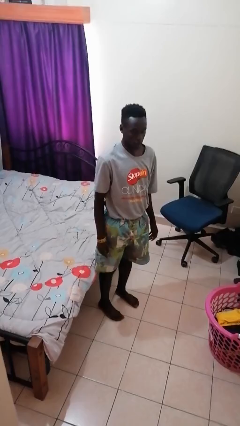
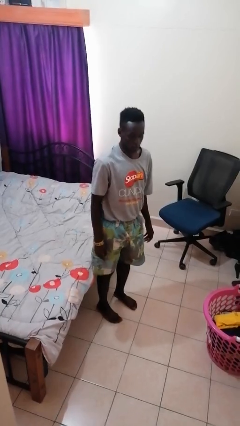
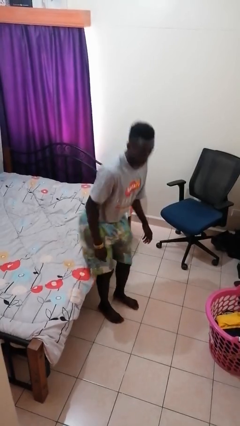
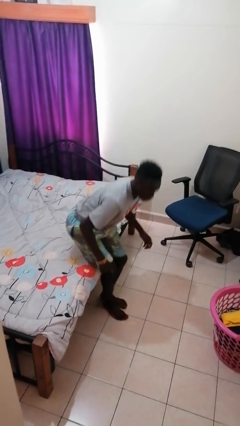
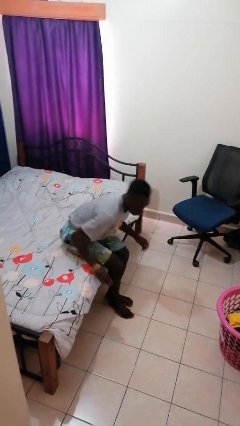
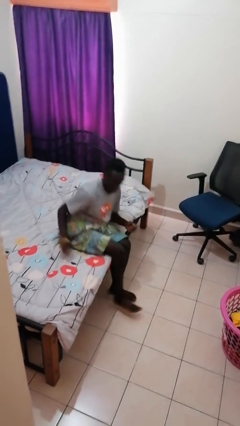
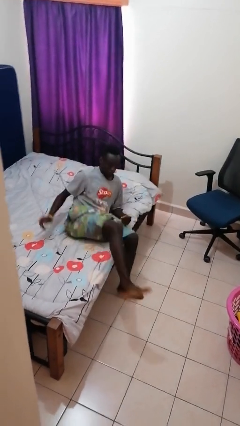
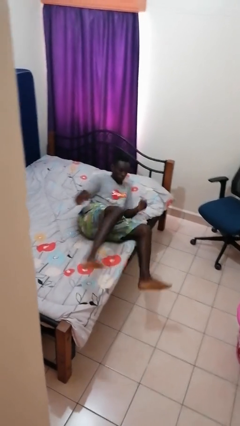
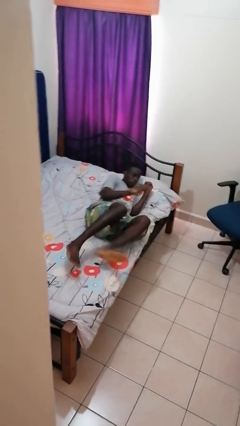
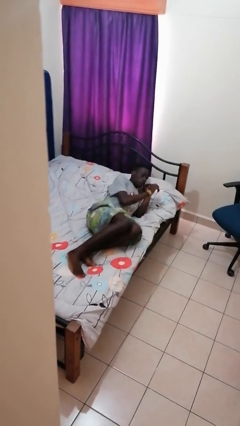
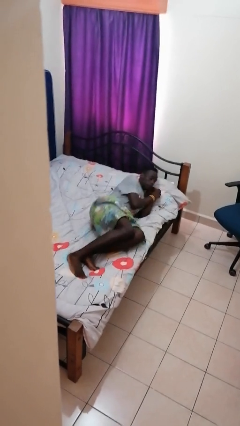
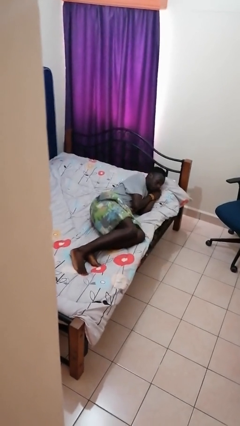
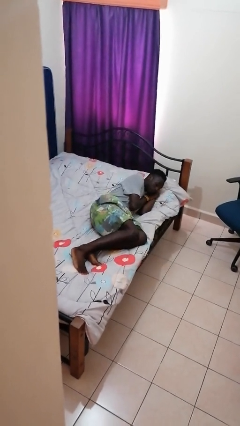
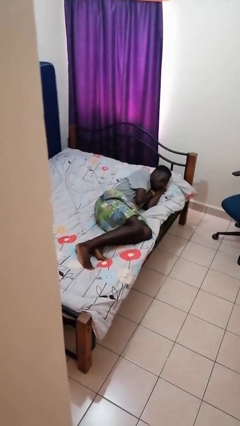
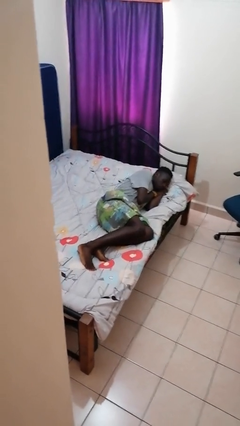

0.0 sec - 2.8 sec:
person lies down on bed

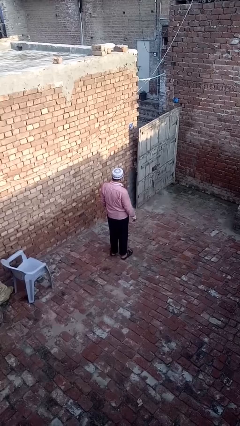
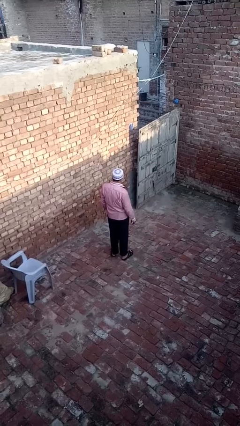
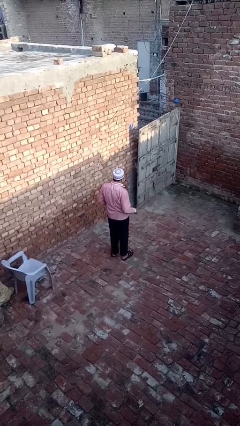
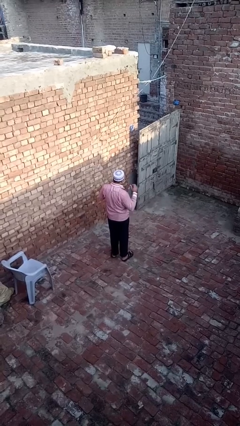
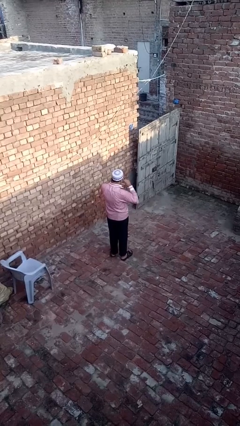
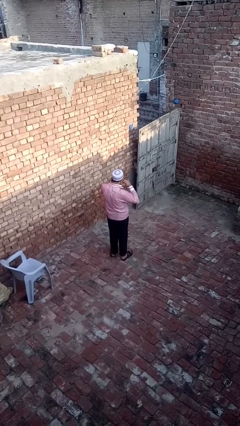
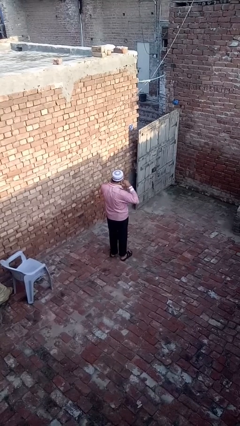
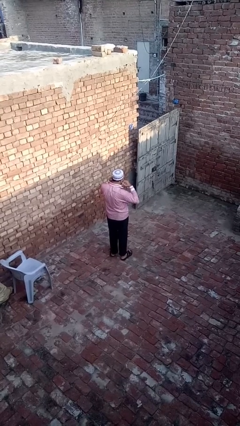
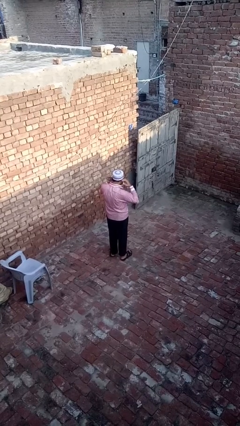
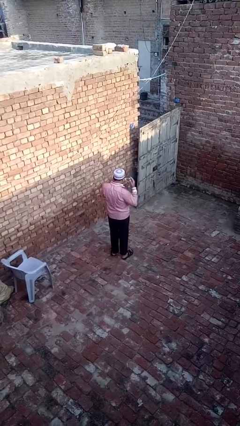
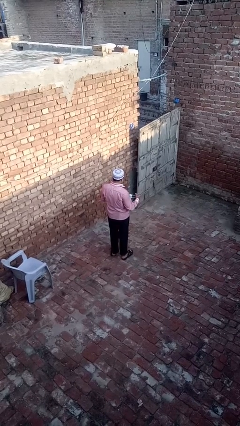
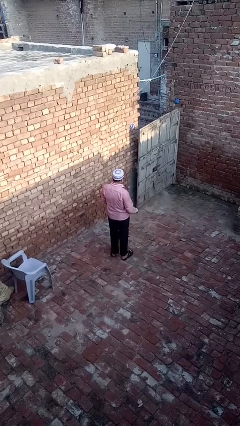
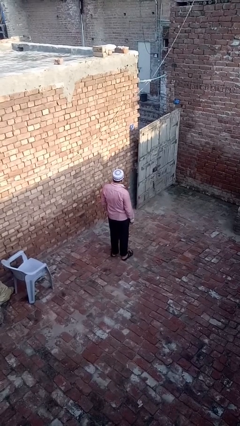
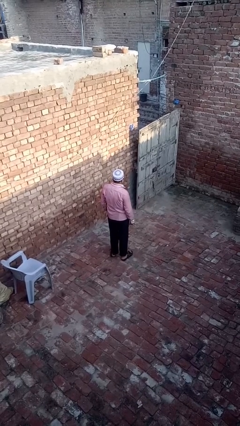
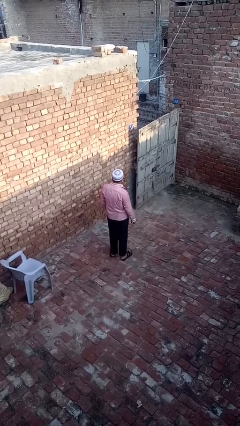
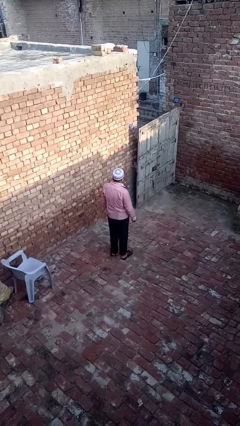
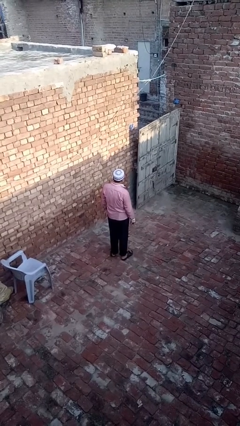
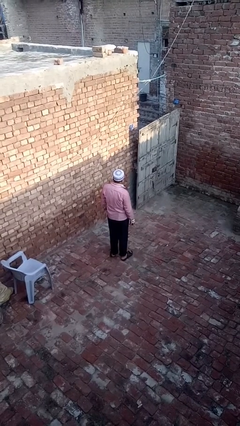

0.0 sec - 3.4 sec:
person takes off facemask

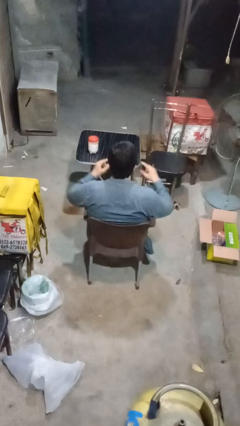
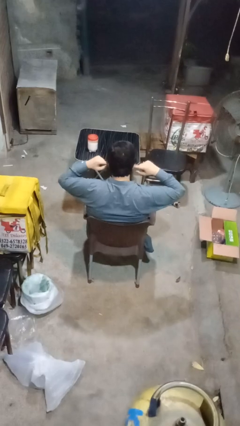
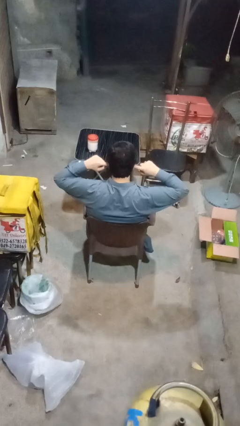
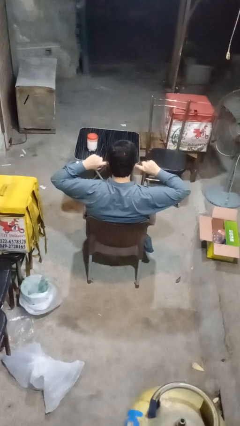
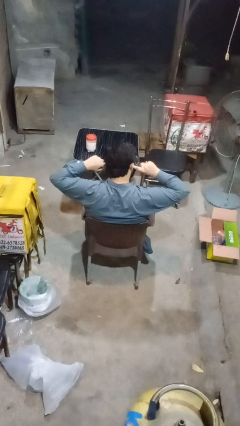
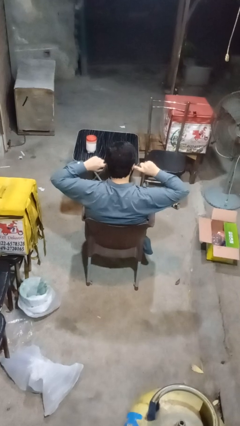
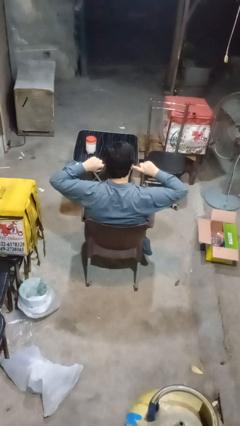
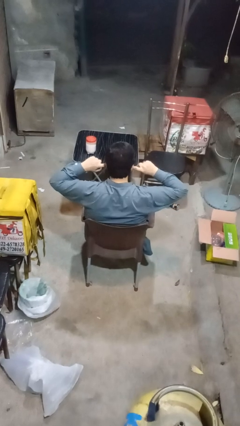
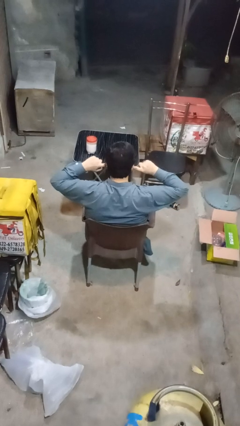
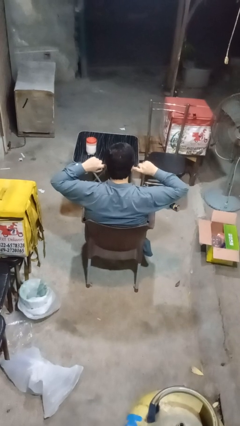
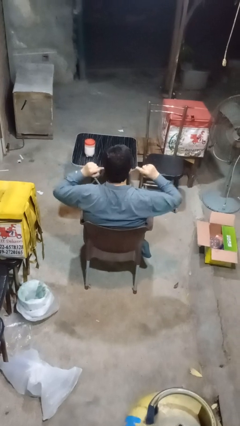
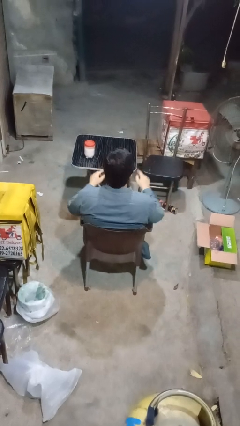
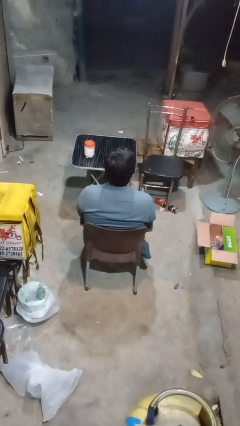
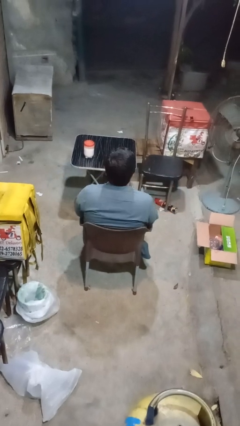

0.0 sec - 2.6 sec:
person puts fingers in ear

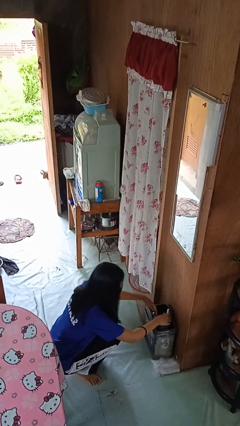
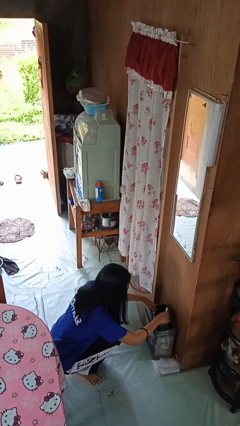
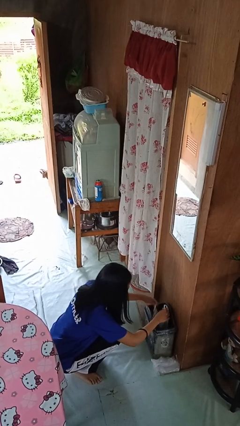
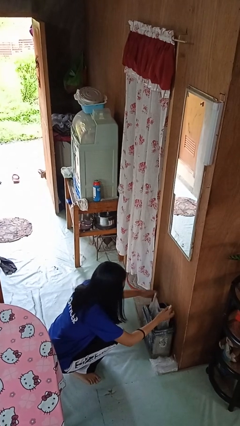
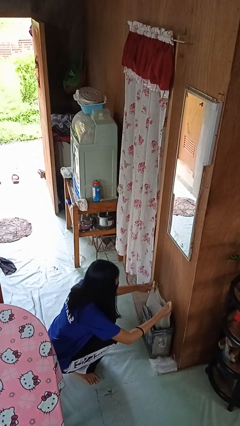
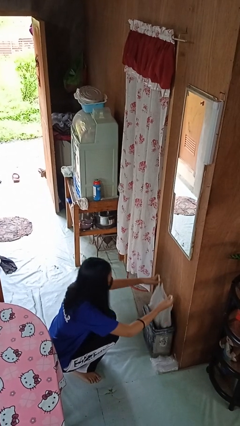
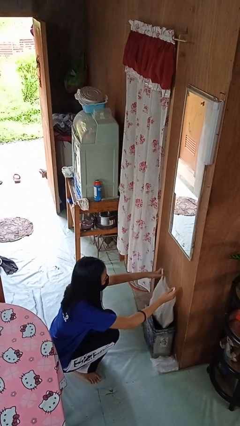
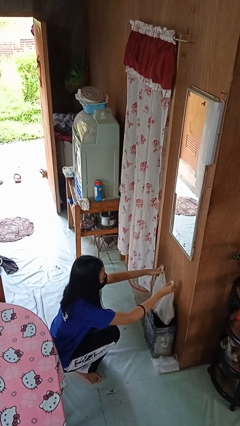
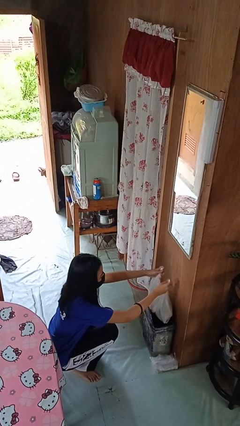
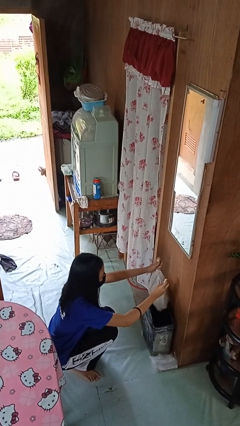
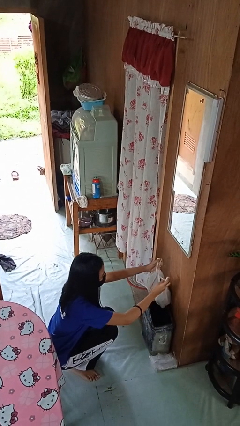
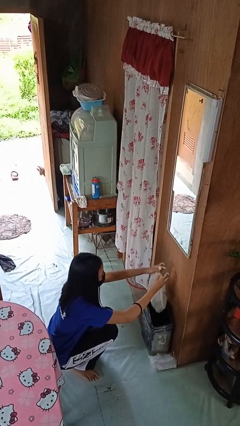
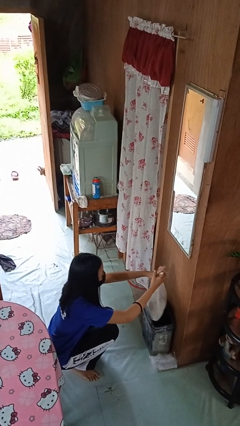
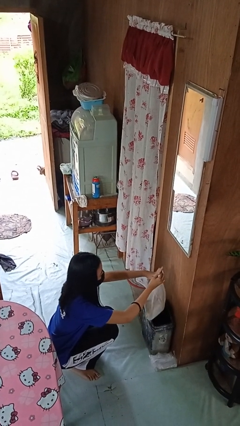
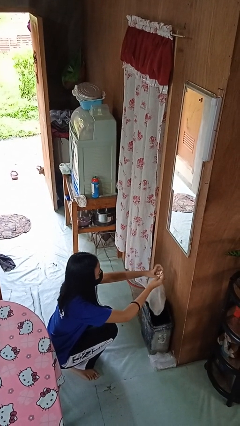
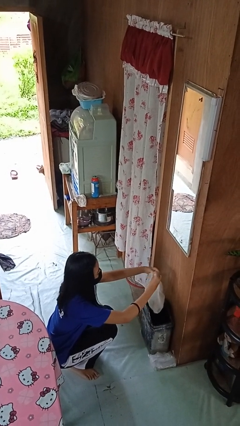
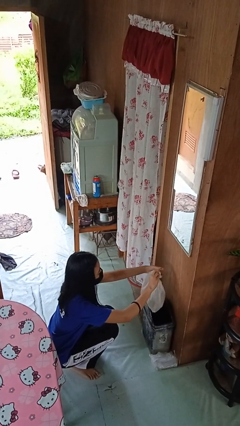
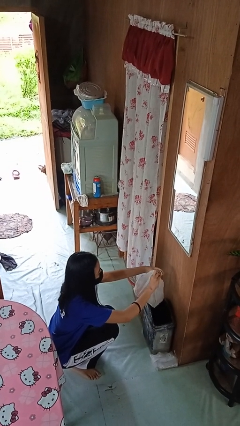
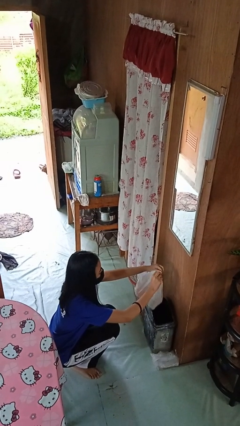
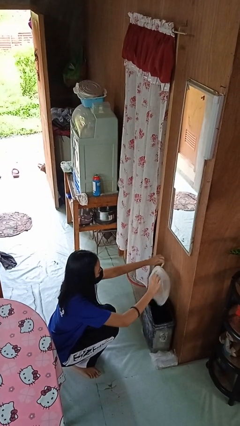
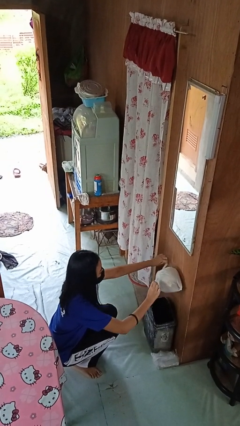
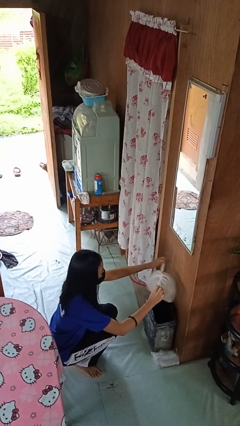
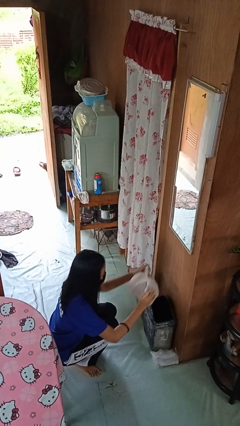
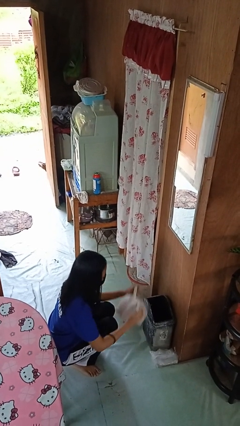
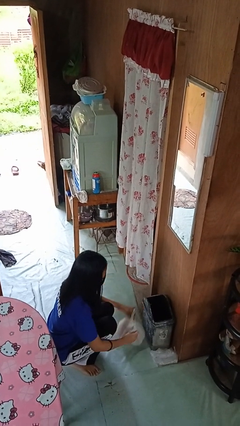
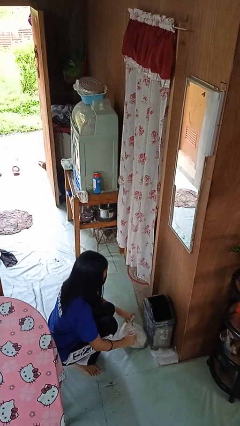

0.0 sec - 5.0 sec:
person removes trashbag from trashcan

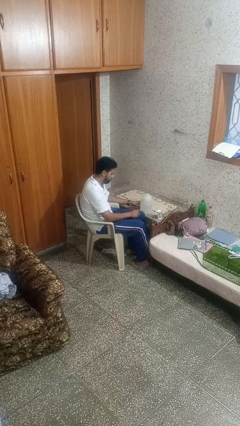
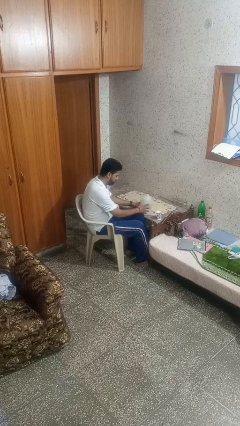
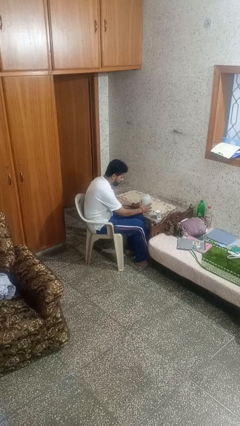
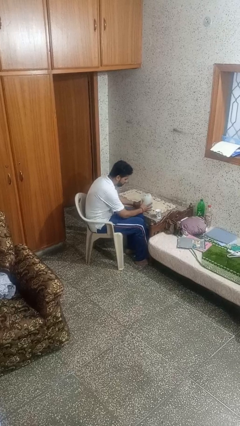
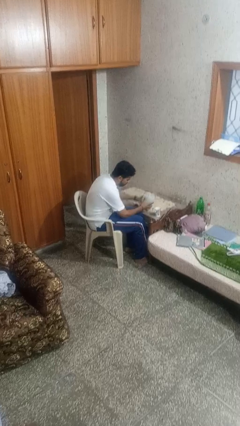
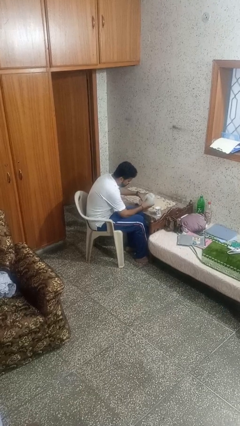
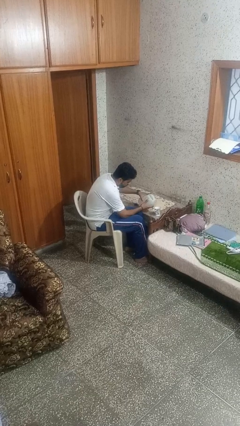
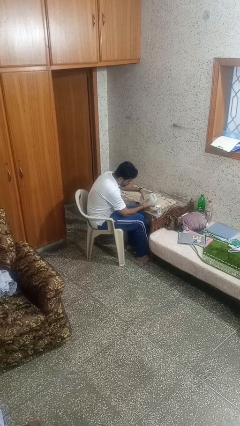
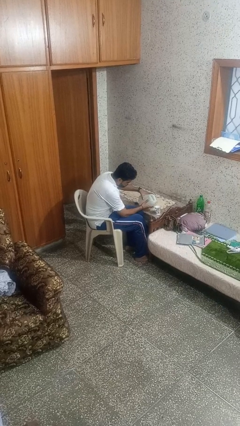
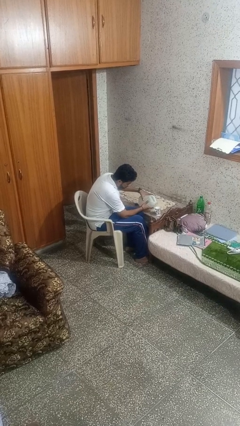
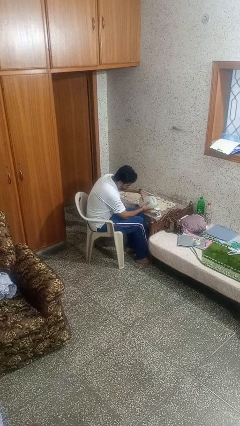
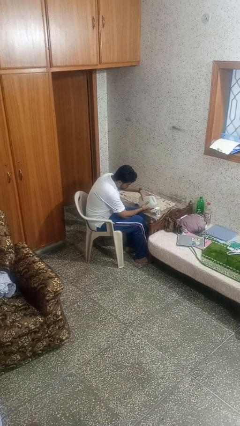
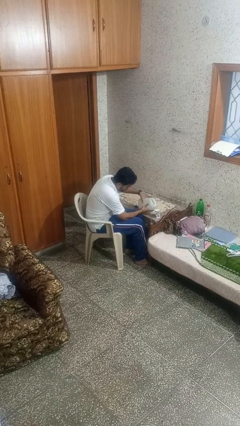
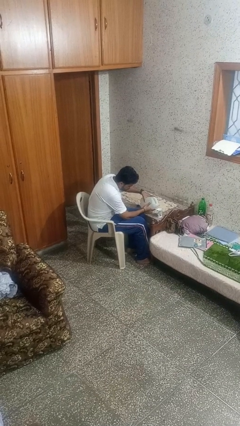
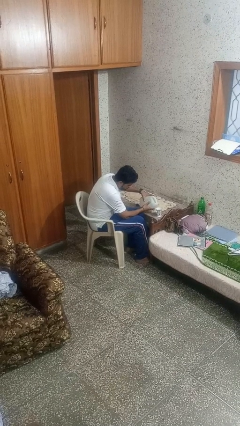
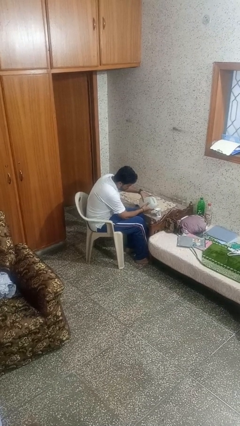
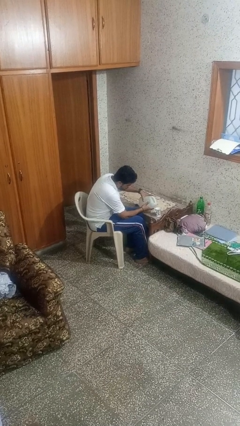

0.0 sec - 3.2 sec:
person pours liquid into cup

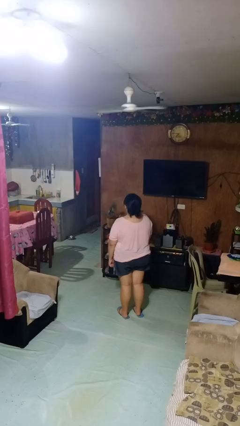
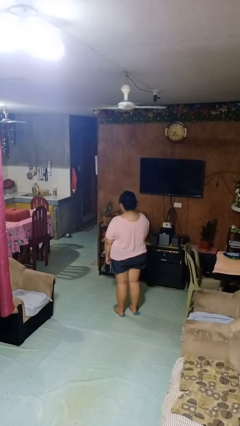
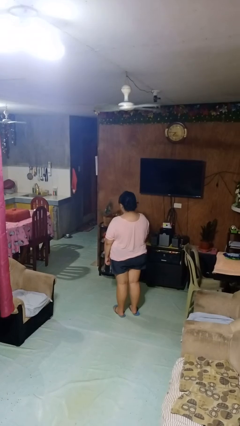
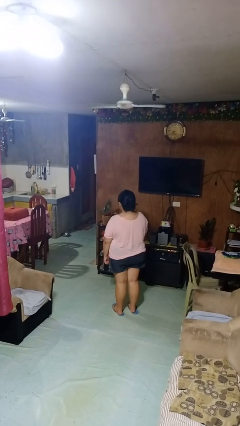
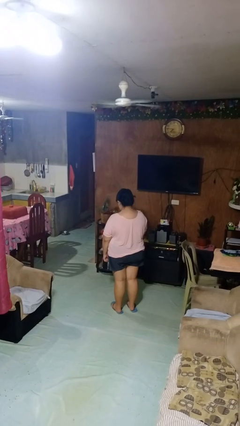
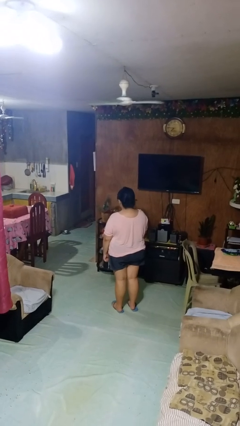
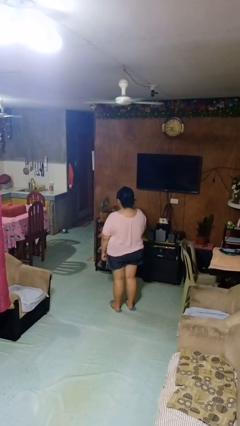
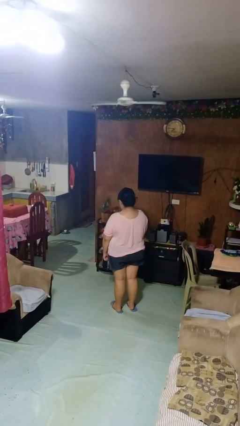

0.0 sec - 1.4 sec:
person nods head
